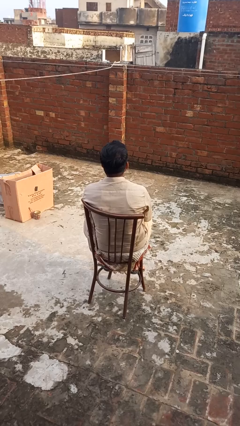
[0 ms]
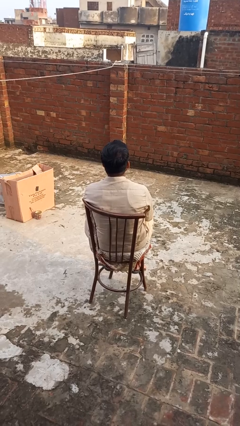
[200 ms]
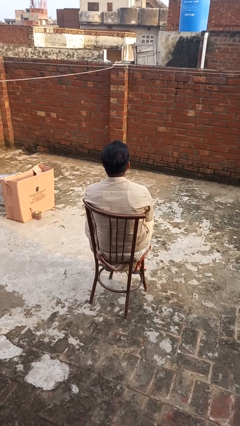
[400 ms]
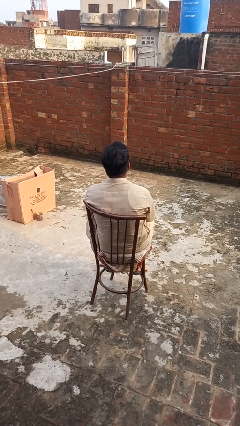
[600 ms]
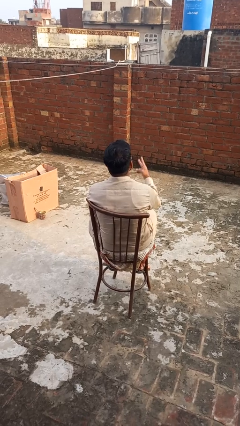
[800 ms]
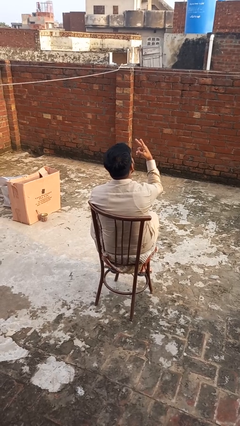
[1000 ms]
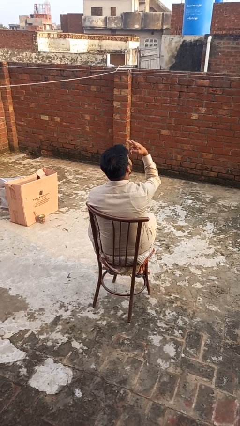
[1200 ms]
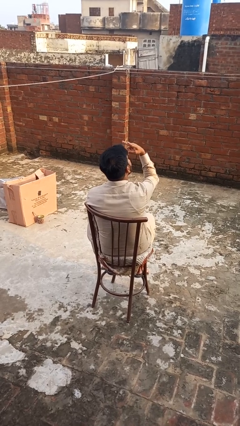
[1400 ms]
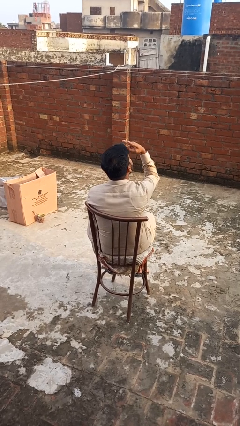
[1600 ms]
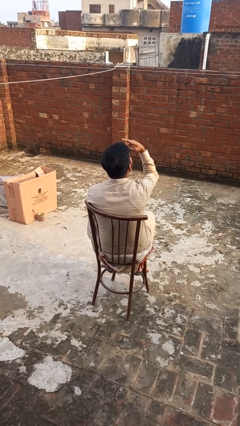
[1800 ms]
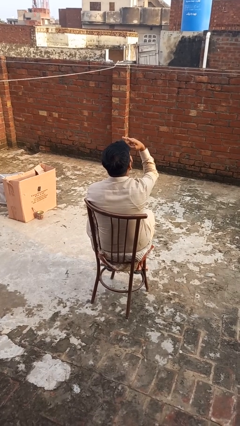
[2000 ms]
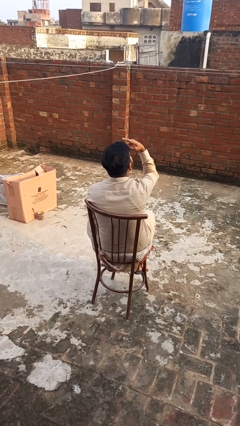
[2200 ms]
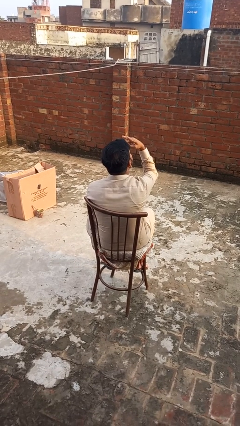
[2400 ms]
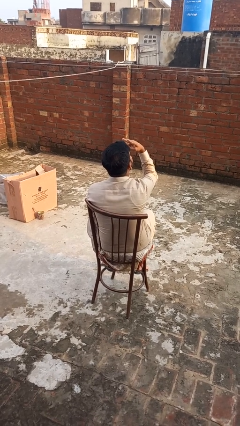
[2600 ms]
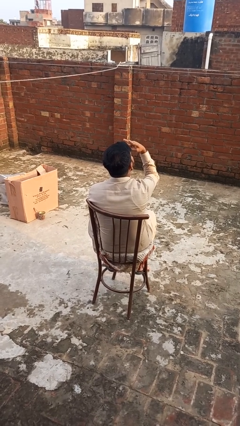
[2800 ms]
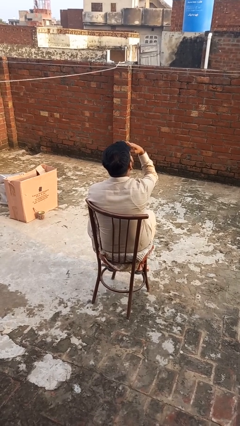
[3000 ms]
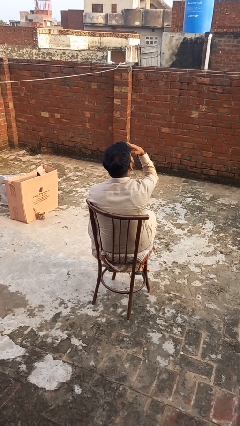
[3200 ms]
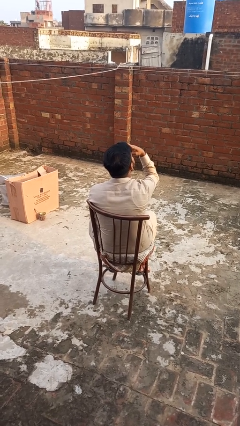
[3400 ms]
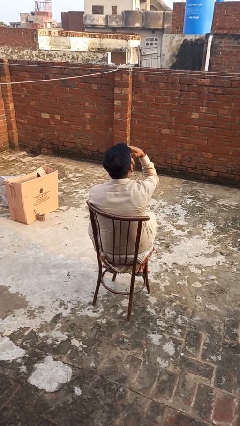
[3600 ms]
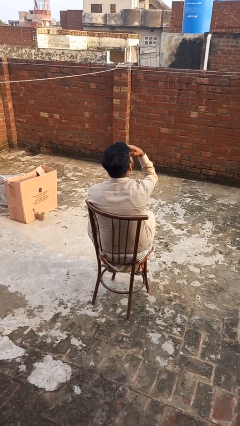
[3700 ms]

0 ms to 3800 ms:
person gestures watch closely

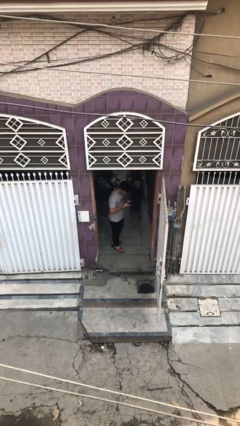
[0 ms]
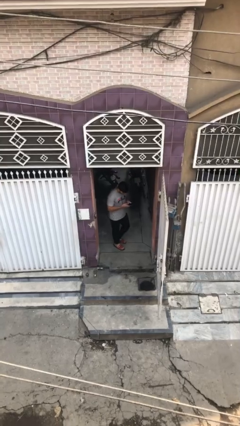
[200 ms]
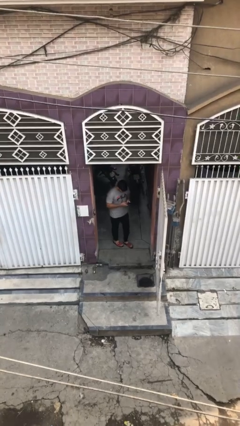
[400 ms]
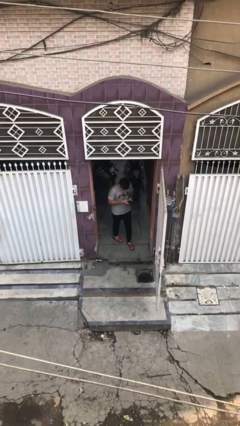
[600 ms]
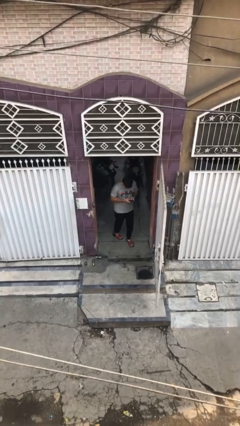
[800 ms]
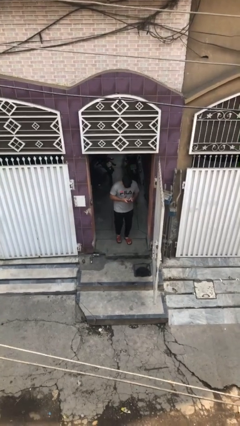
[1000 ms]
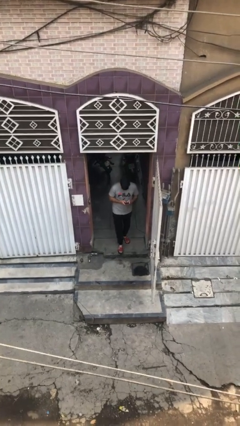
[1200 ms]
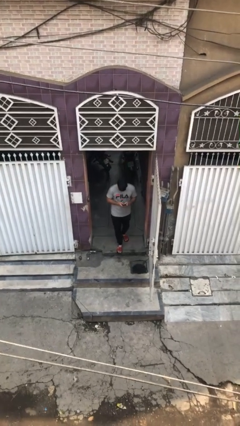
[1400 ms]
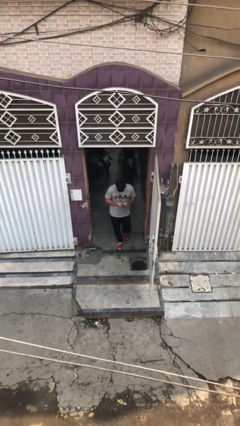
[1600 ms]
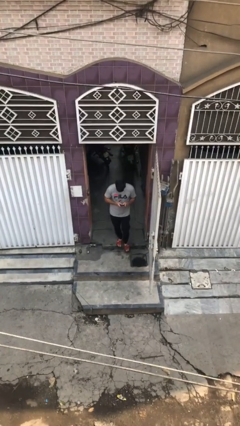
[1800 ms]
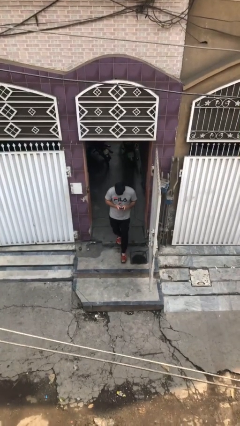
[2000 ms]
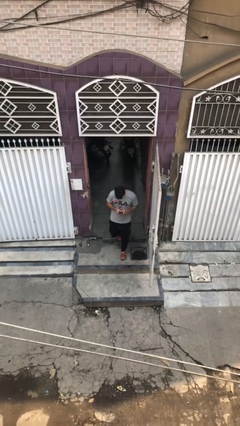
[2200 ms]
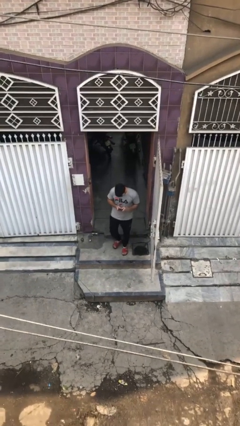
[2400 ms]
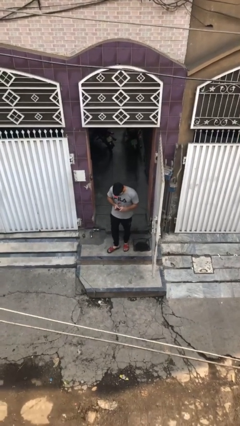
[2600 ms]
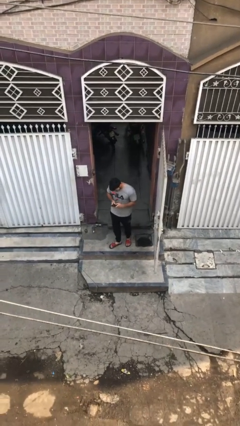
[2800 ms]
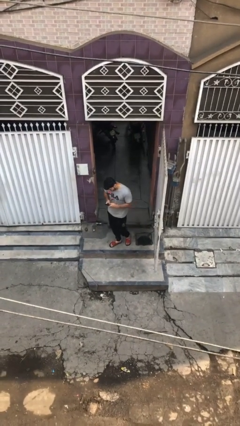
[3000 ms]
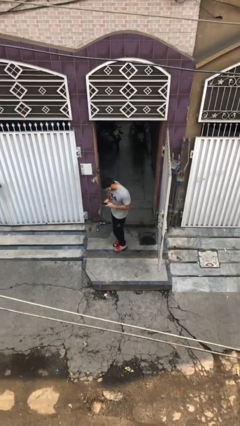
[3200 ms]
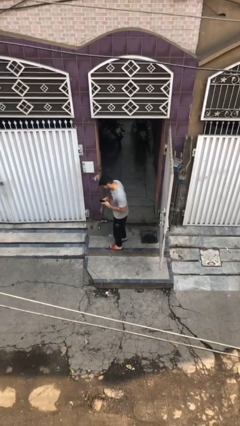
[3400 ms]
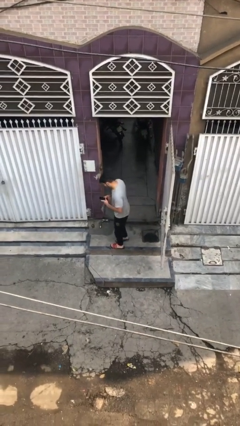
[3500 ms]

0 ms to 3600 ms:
person enters scene through structure

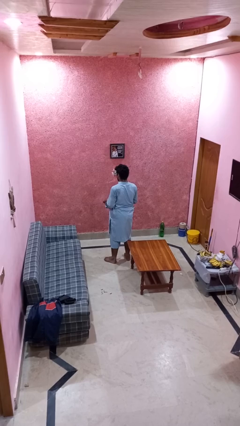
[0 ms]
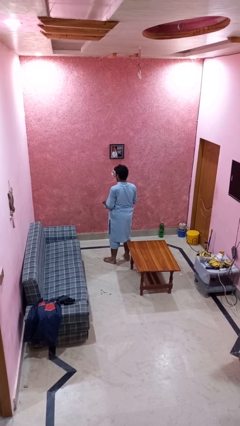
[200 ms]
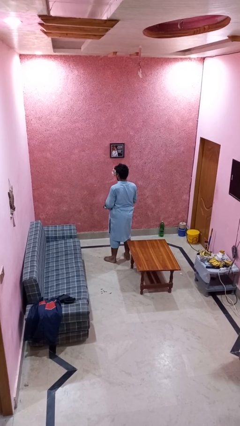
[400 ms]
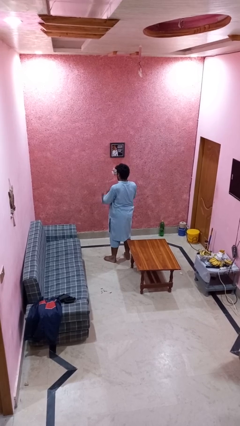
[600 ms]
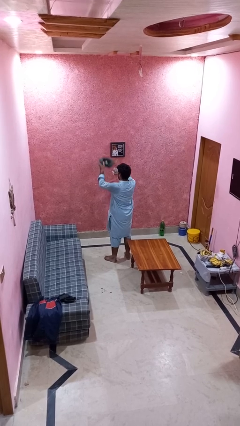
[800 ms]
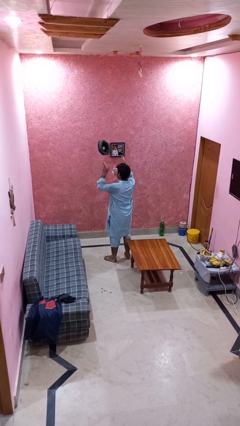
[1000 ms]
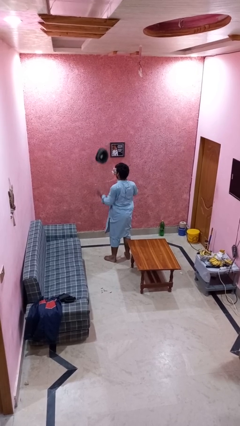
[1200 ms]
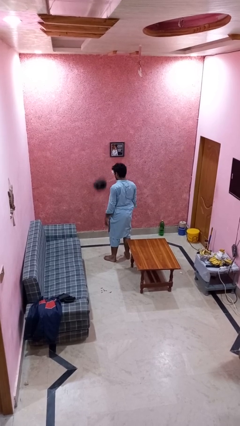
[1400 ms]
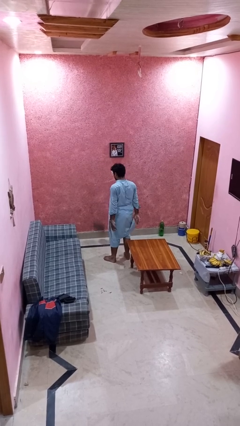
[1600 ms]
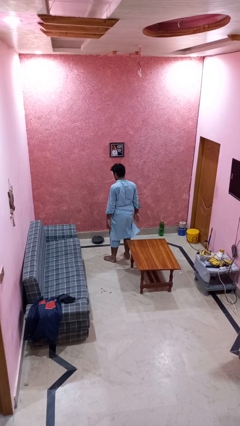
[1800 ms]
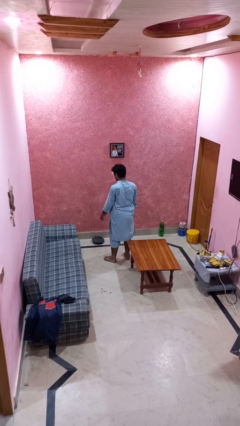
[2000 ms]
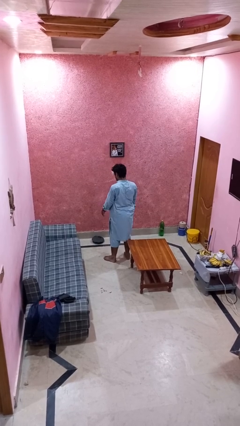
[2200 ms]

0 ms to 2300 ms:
person throws object into air

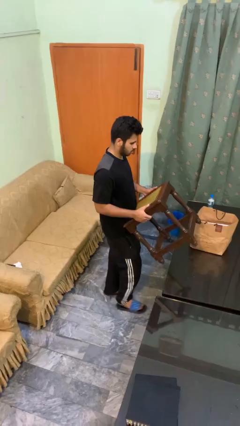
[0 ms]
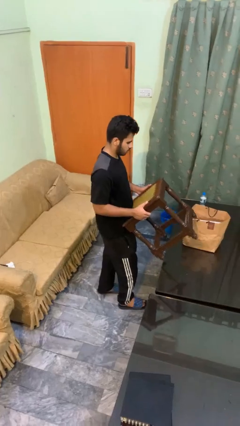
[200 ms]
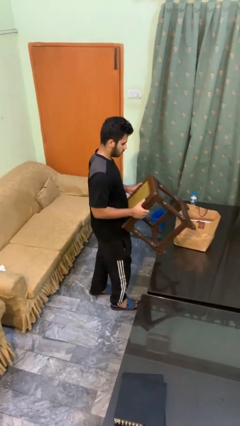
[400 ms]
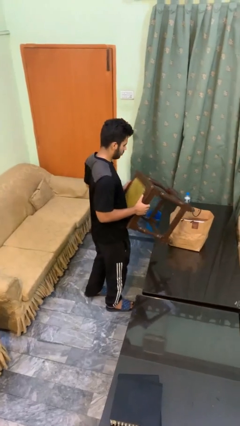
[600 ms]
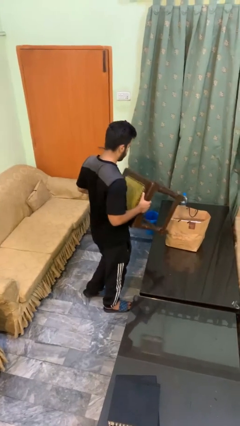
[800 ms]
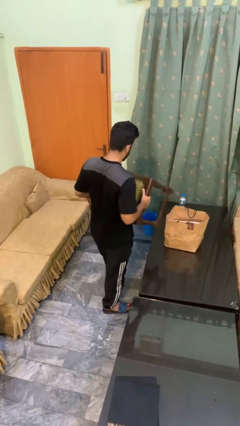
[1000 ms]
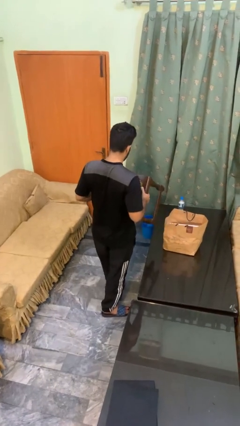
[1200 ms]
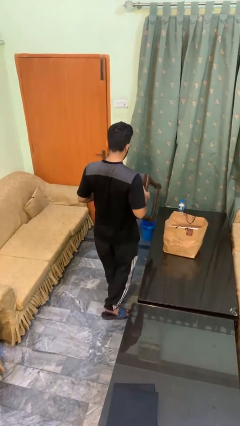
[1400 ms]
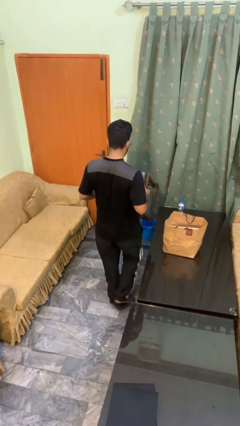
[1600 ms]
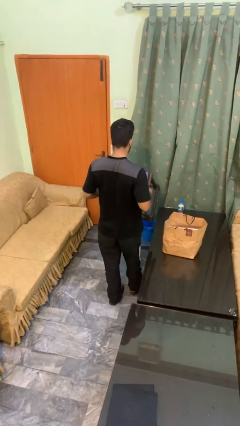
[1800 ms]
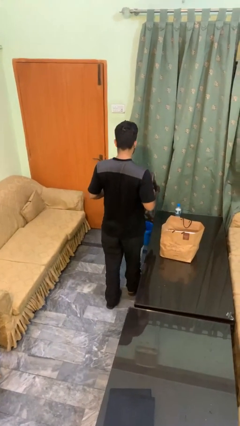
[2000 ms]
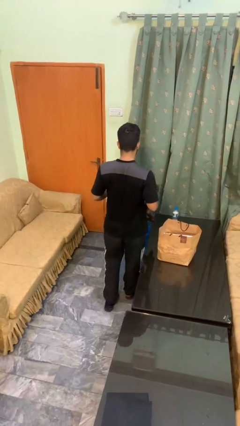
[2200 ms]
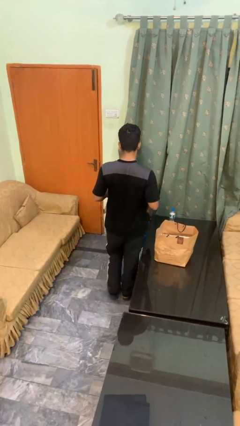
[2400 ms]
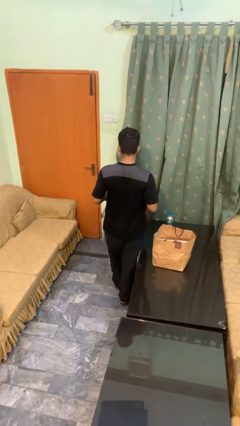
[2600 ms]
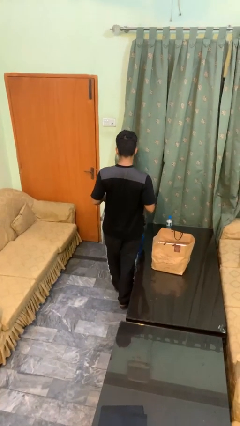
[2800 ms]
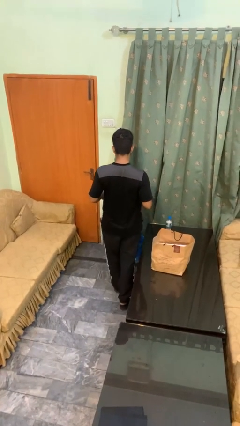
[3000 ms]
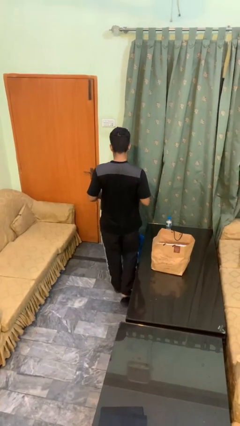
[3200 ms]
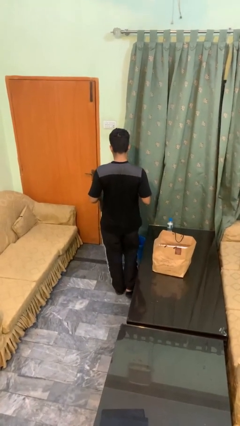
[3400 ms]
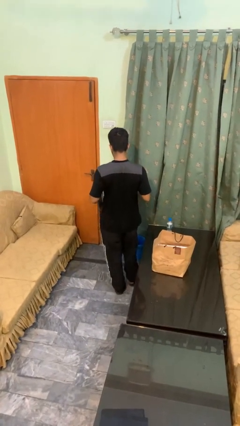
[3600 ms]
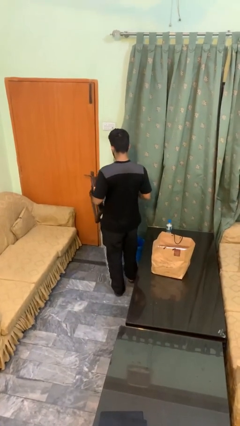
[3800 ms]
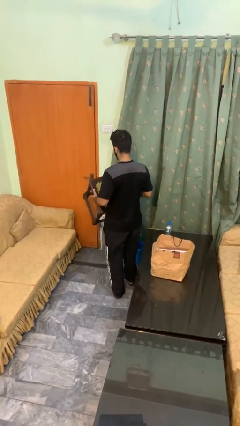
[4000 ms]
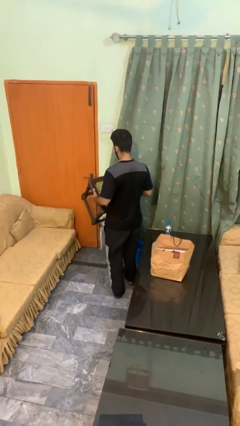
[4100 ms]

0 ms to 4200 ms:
person carries furniture

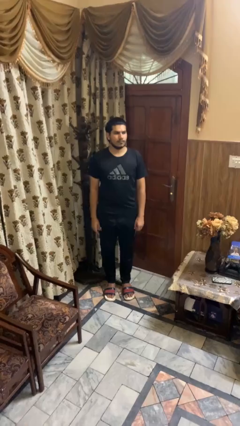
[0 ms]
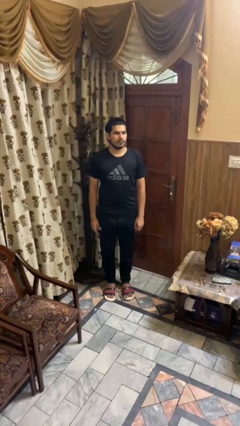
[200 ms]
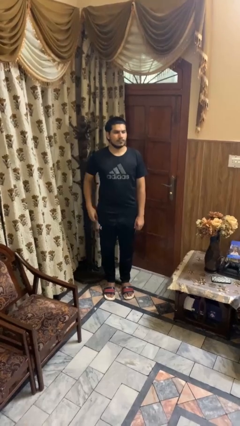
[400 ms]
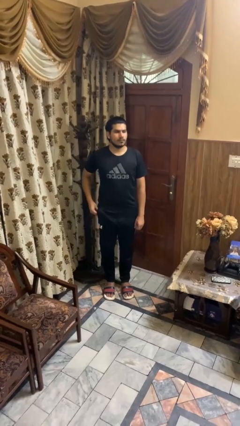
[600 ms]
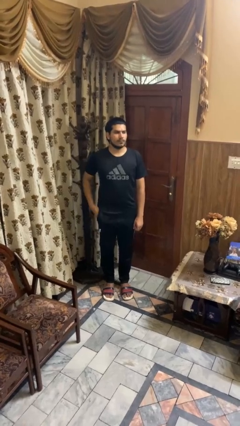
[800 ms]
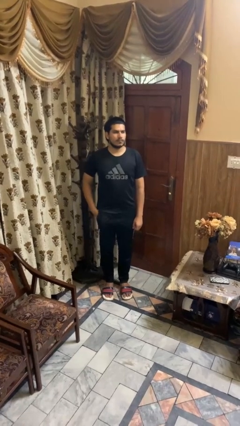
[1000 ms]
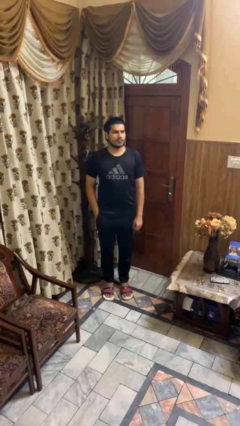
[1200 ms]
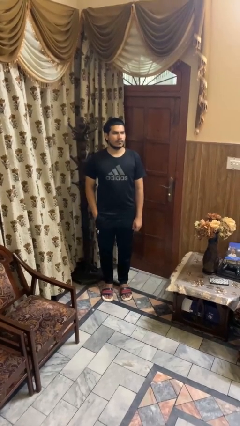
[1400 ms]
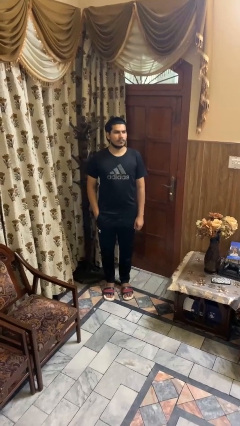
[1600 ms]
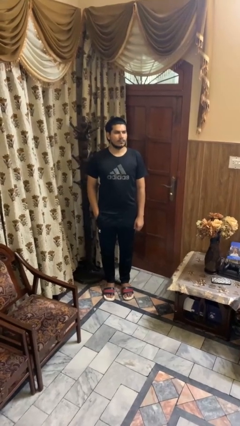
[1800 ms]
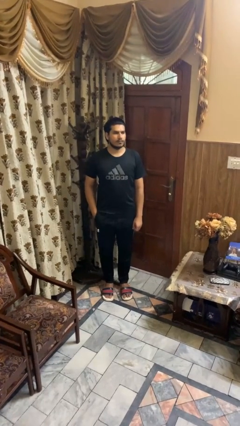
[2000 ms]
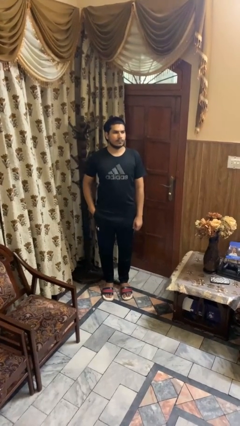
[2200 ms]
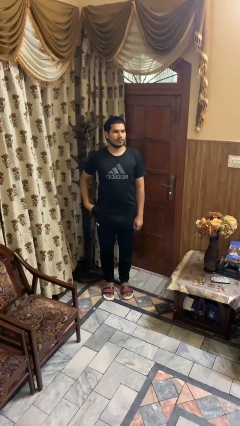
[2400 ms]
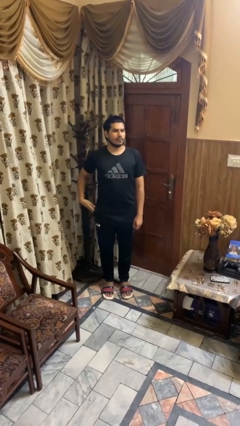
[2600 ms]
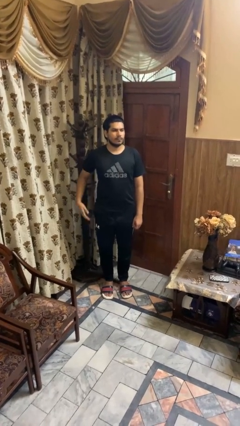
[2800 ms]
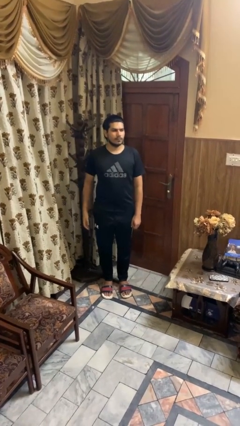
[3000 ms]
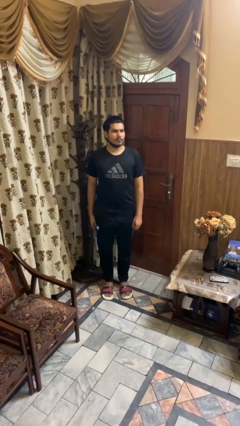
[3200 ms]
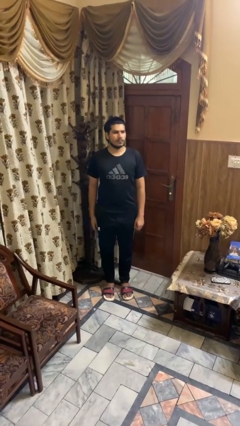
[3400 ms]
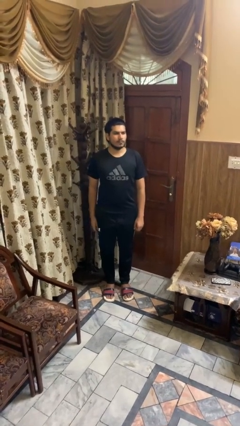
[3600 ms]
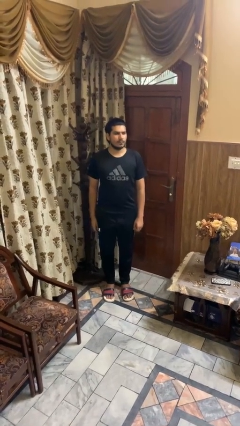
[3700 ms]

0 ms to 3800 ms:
person puts hands in back pockets
